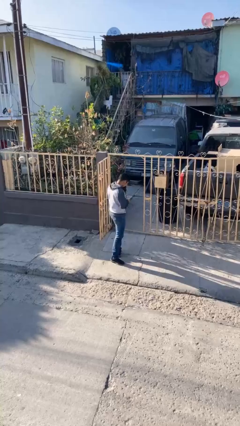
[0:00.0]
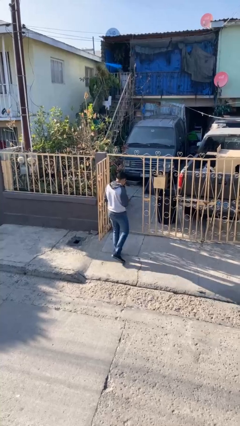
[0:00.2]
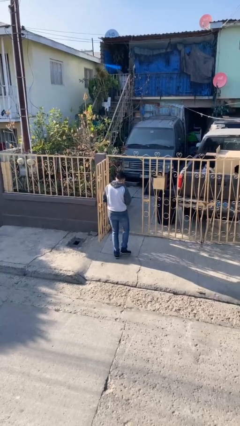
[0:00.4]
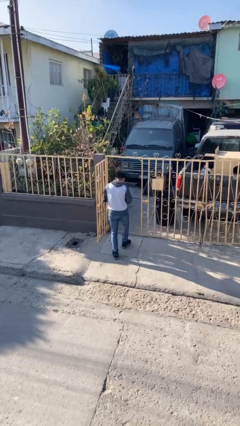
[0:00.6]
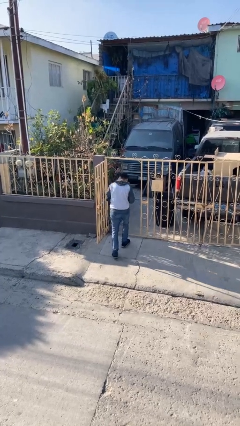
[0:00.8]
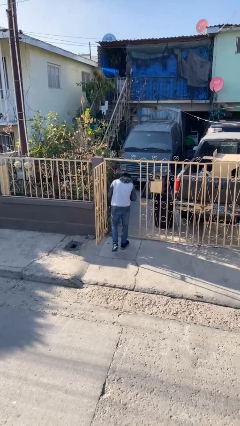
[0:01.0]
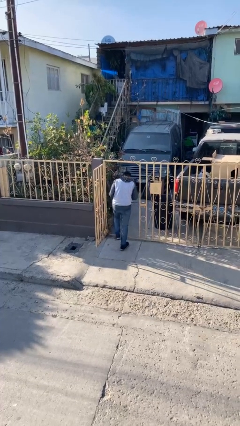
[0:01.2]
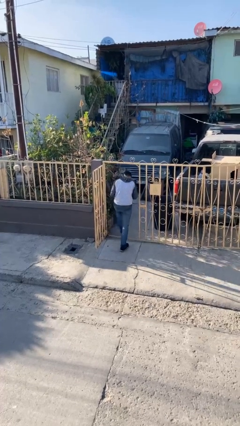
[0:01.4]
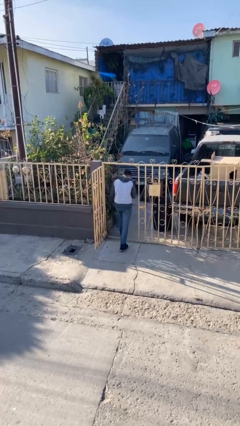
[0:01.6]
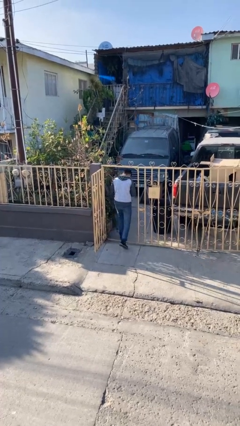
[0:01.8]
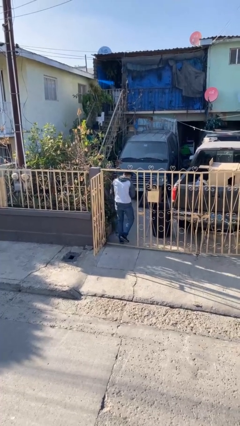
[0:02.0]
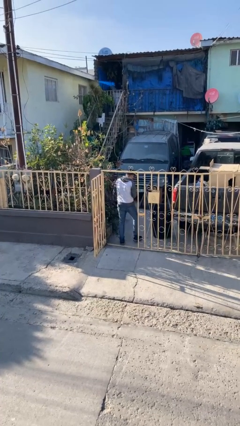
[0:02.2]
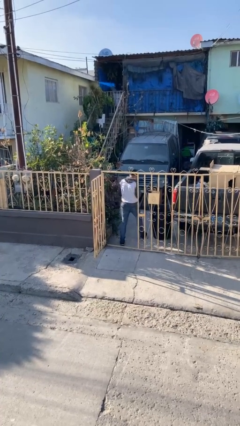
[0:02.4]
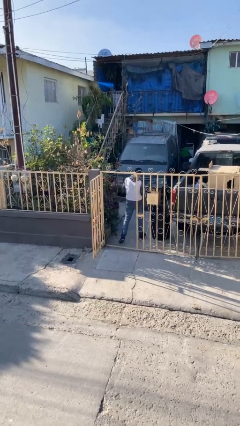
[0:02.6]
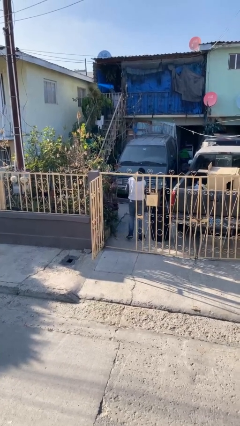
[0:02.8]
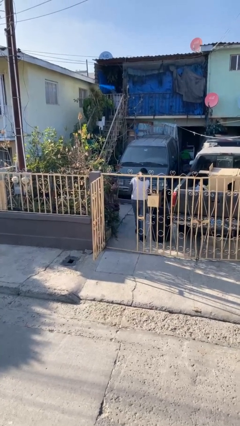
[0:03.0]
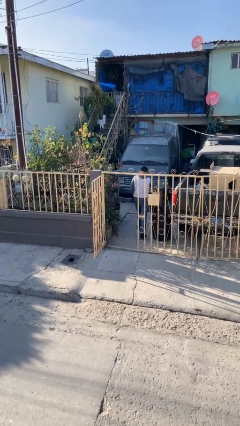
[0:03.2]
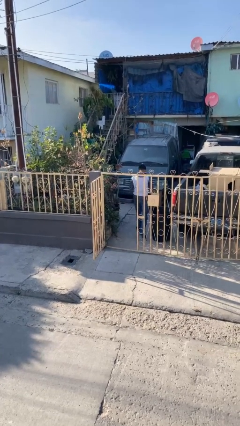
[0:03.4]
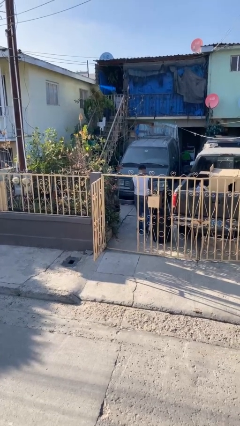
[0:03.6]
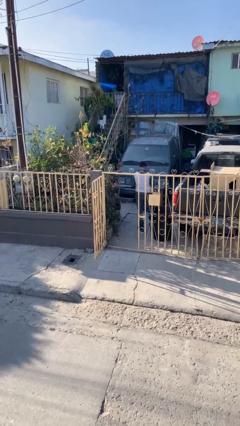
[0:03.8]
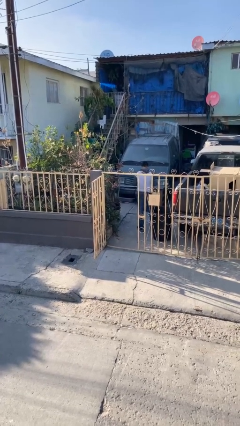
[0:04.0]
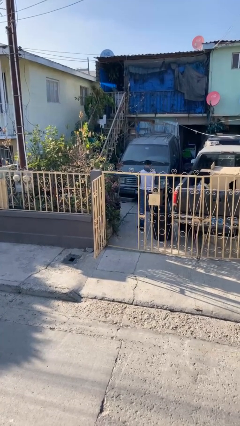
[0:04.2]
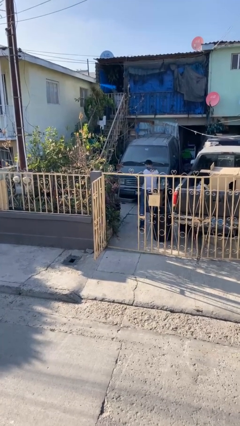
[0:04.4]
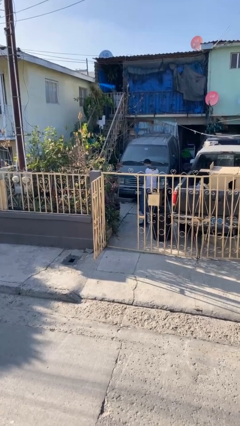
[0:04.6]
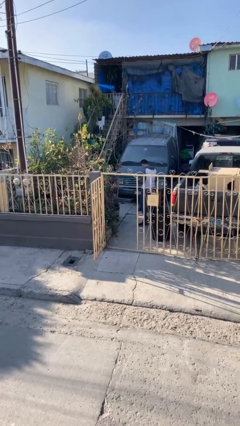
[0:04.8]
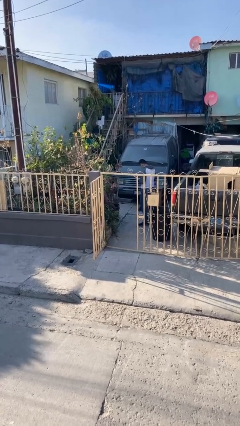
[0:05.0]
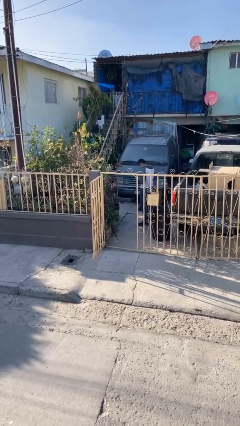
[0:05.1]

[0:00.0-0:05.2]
person exits scene through structure

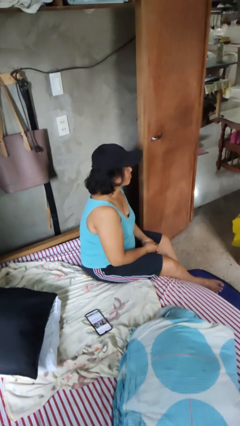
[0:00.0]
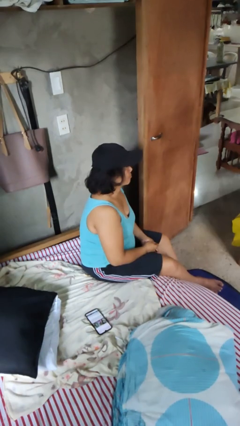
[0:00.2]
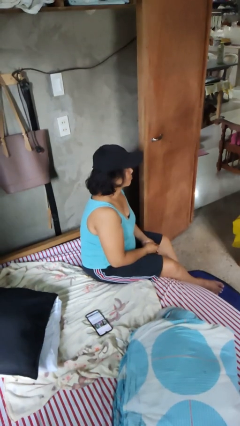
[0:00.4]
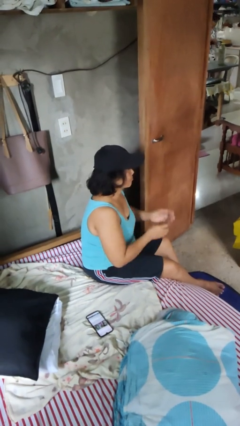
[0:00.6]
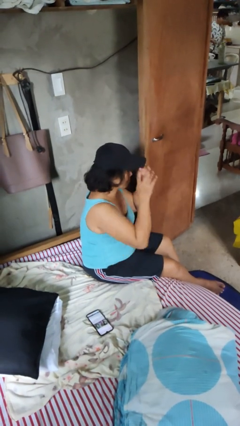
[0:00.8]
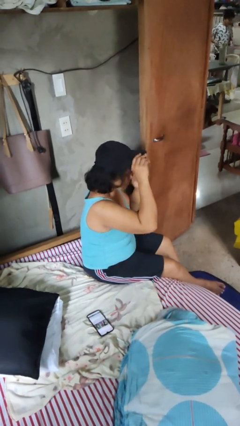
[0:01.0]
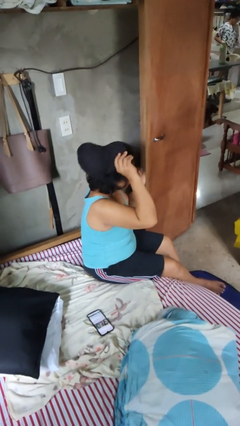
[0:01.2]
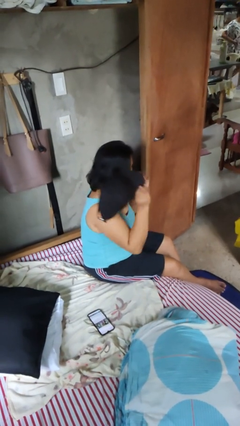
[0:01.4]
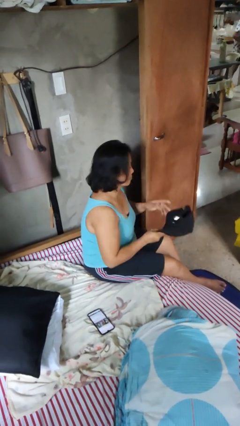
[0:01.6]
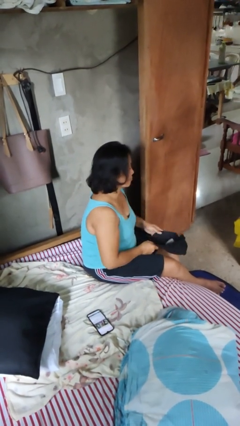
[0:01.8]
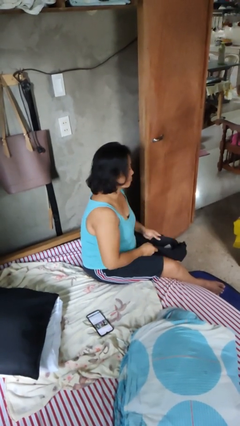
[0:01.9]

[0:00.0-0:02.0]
person takes off hat

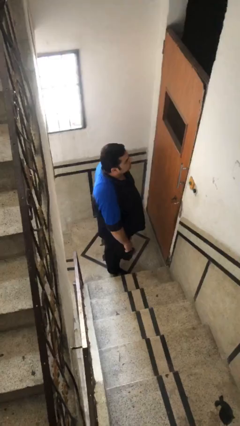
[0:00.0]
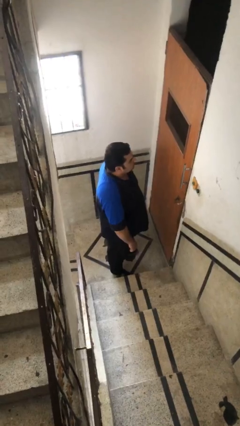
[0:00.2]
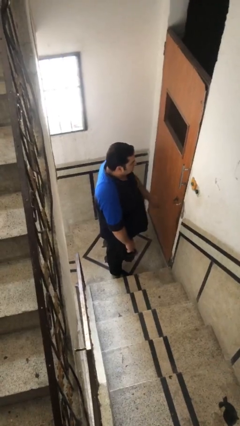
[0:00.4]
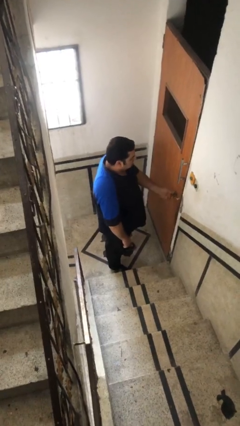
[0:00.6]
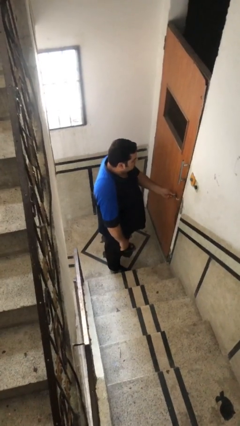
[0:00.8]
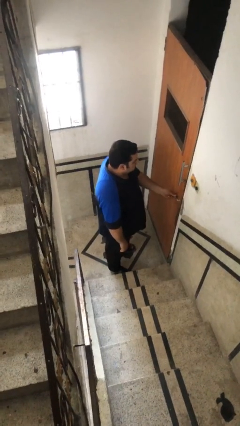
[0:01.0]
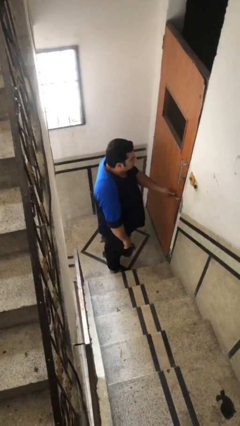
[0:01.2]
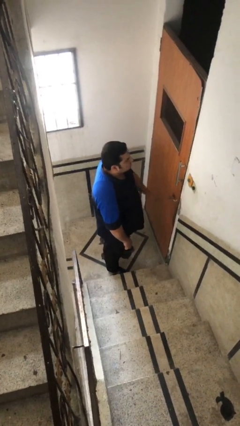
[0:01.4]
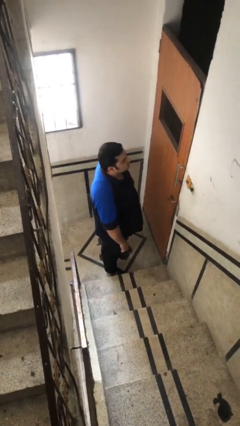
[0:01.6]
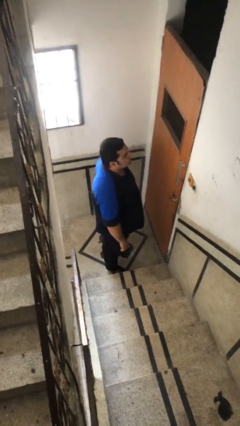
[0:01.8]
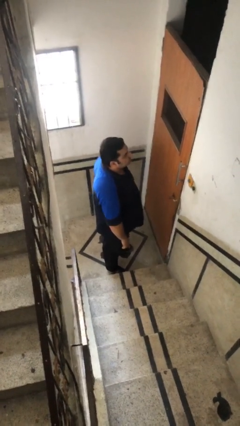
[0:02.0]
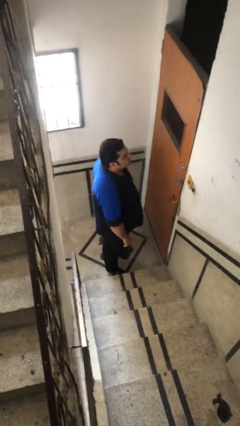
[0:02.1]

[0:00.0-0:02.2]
person locks door with keys

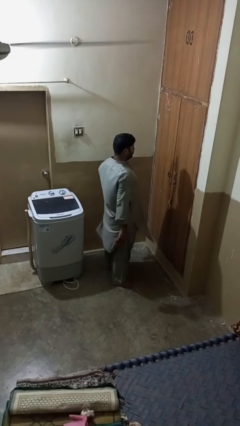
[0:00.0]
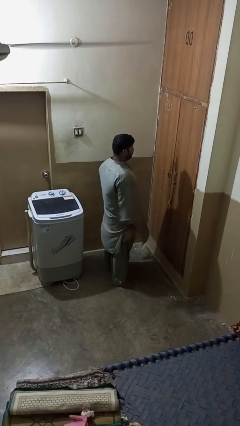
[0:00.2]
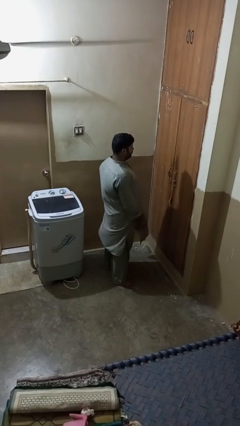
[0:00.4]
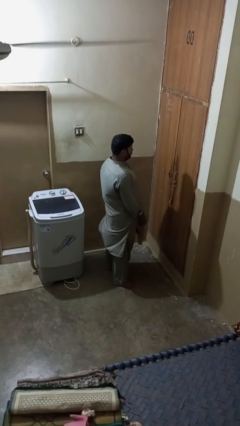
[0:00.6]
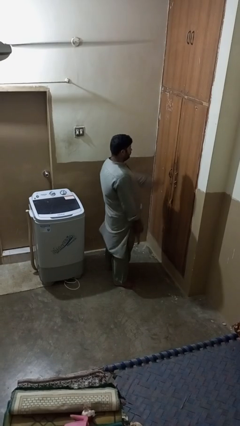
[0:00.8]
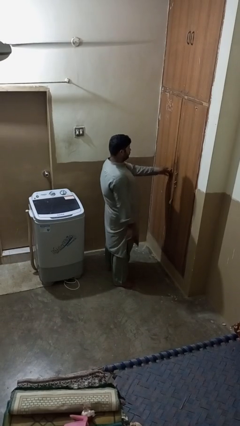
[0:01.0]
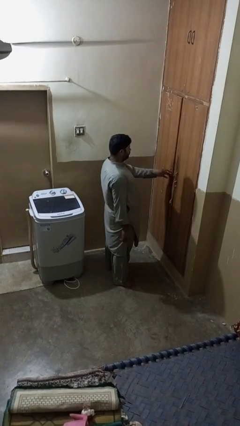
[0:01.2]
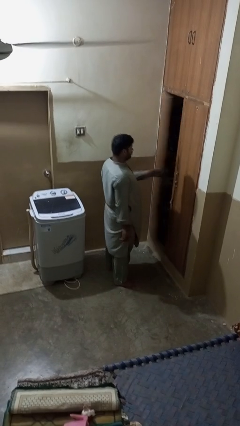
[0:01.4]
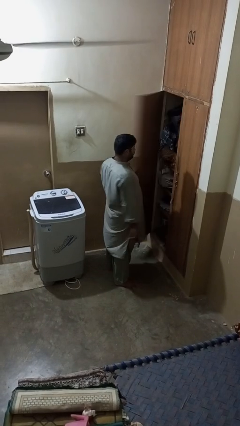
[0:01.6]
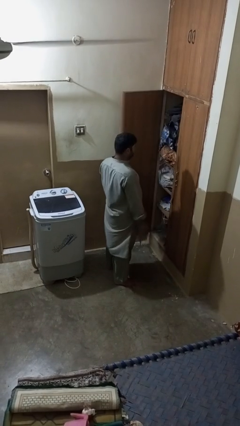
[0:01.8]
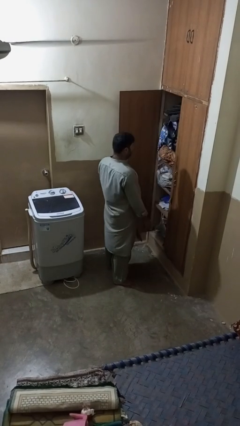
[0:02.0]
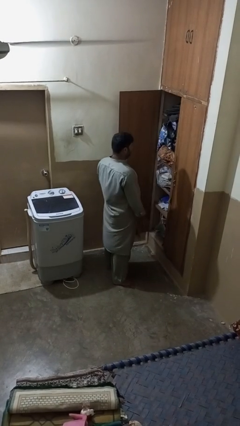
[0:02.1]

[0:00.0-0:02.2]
person opens closet door

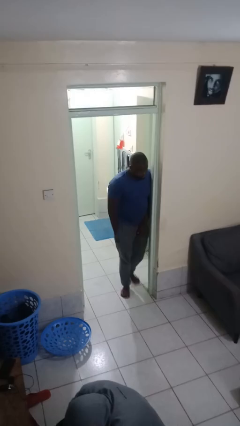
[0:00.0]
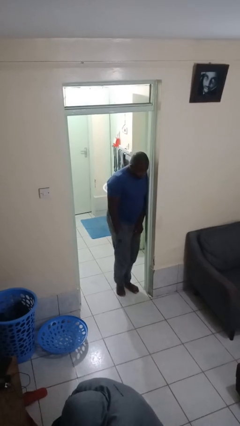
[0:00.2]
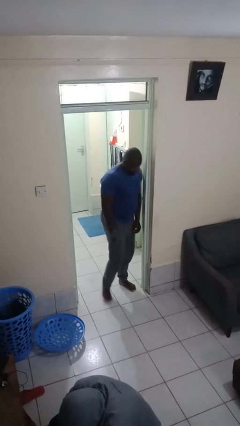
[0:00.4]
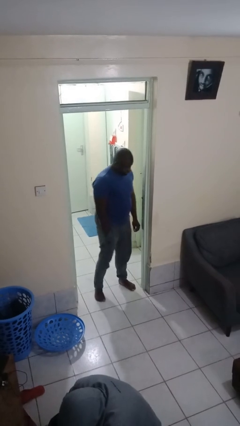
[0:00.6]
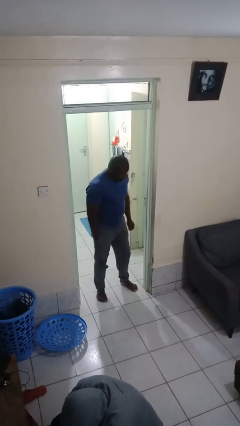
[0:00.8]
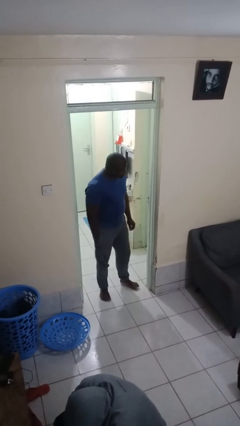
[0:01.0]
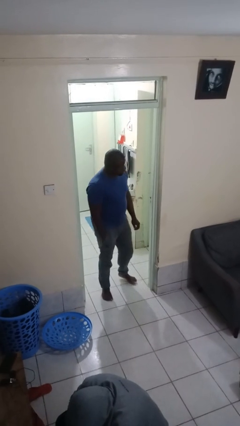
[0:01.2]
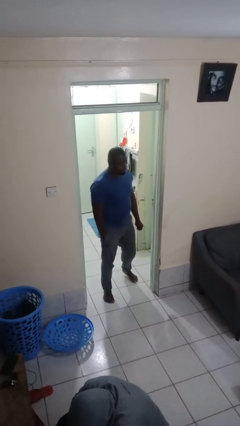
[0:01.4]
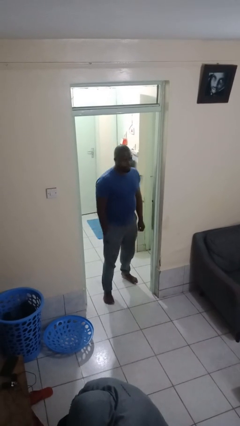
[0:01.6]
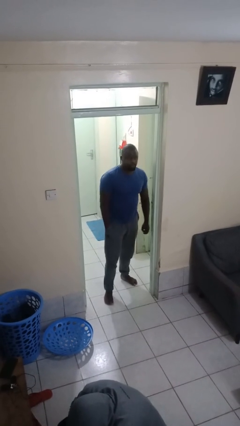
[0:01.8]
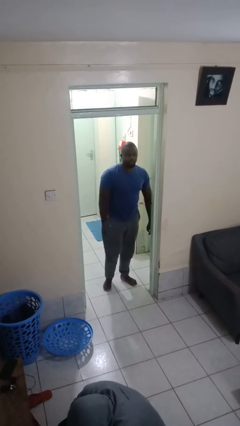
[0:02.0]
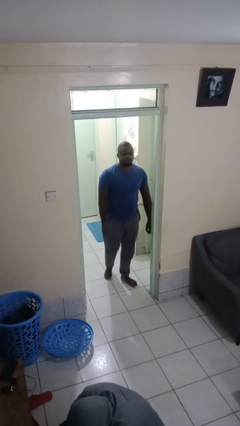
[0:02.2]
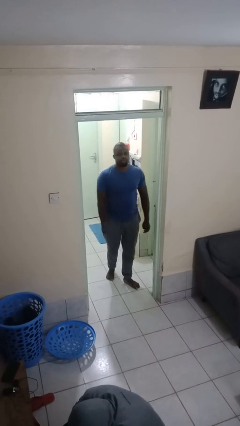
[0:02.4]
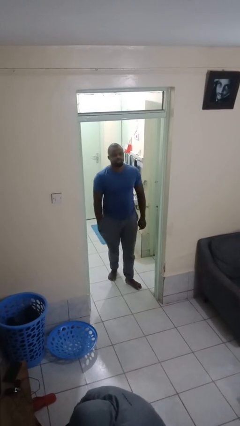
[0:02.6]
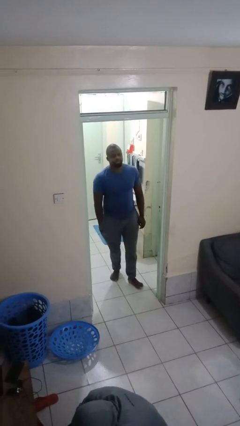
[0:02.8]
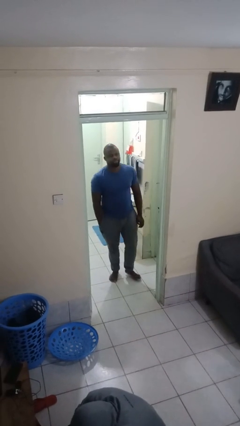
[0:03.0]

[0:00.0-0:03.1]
person bumps into wall

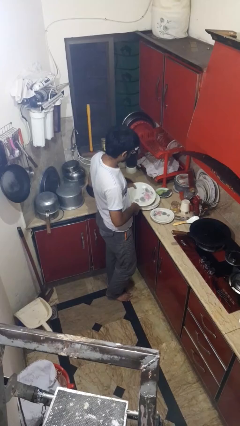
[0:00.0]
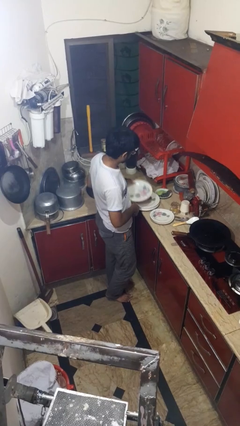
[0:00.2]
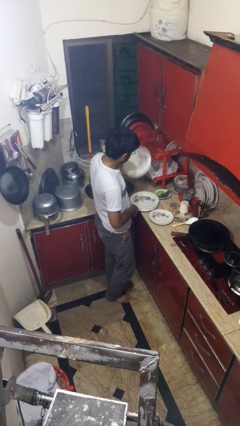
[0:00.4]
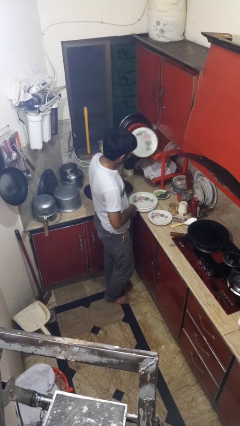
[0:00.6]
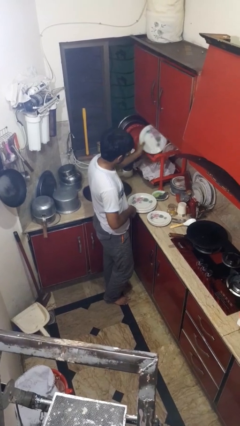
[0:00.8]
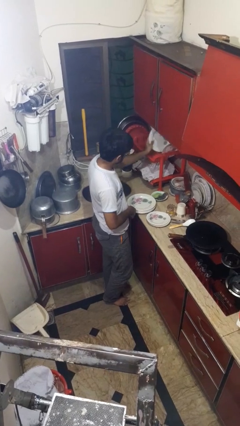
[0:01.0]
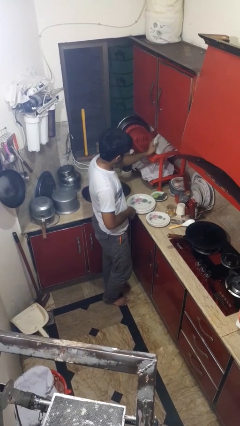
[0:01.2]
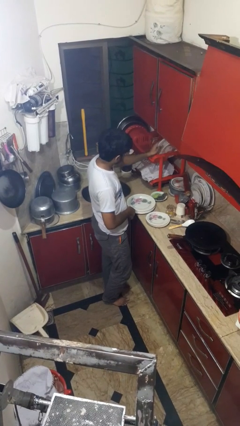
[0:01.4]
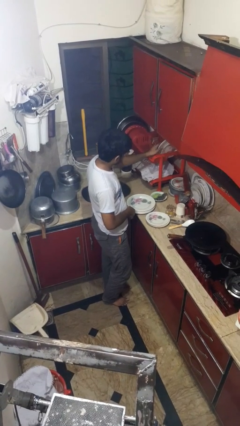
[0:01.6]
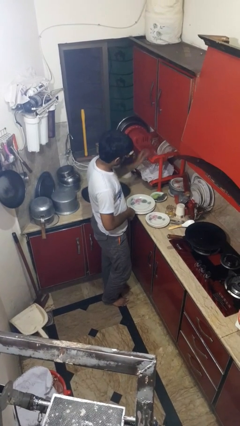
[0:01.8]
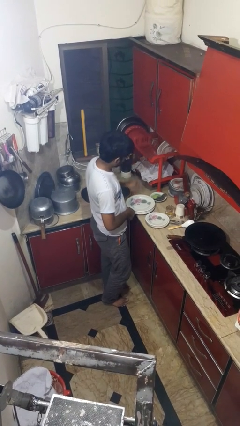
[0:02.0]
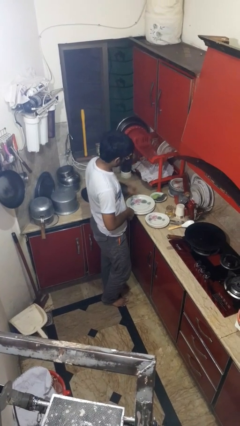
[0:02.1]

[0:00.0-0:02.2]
person loads dishwasher

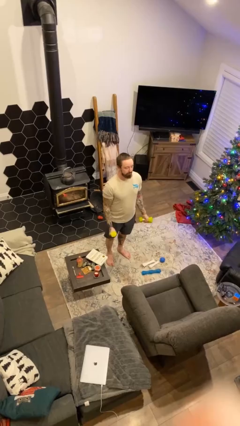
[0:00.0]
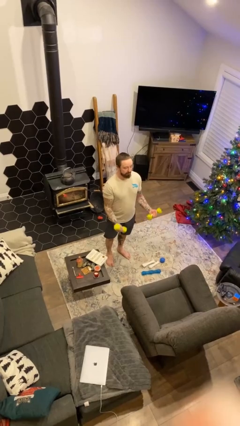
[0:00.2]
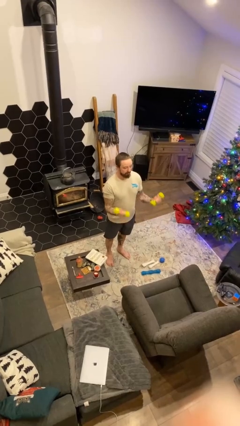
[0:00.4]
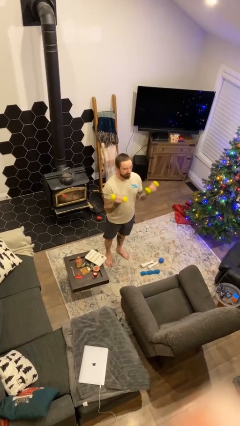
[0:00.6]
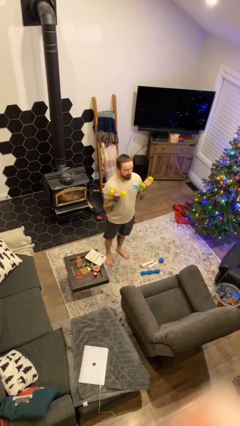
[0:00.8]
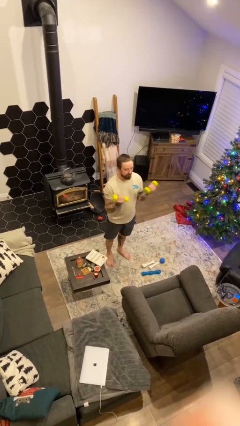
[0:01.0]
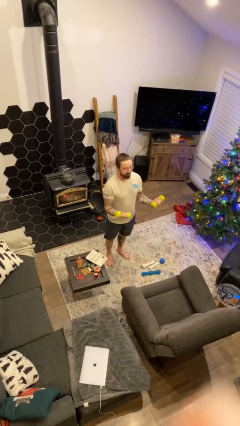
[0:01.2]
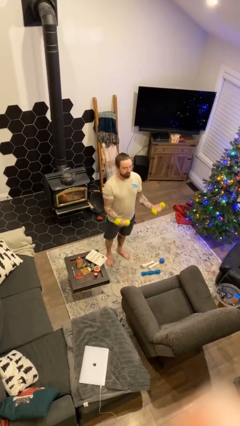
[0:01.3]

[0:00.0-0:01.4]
person lifts dumbbells
